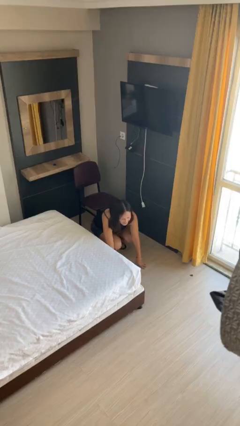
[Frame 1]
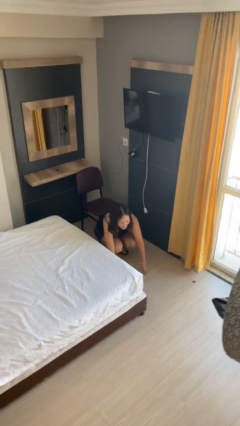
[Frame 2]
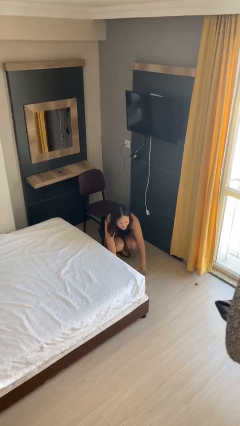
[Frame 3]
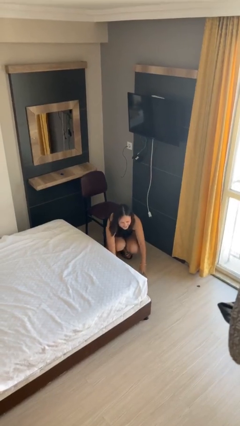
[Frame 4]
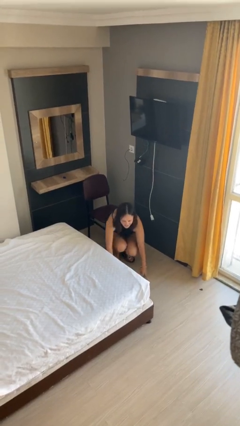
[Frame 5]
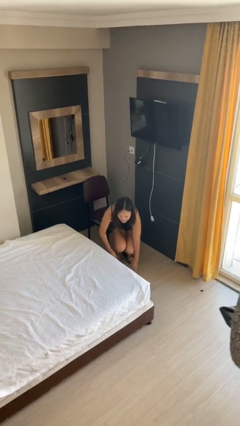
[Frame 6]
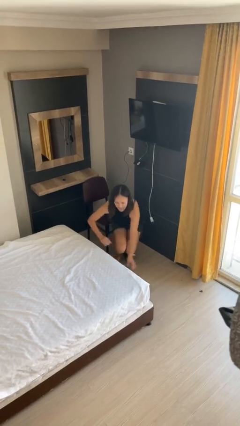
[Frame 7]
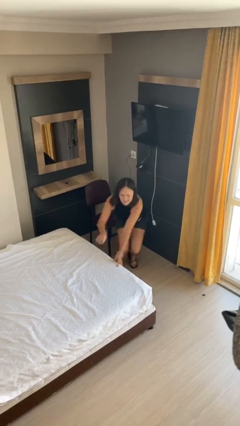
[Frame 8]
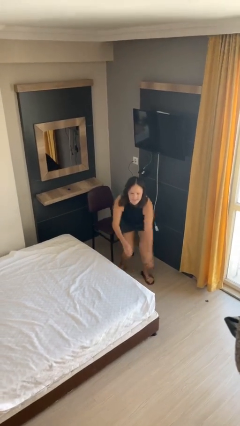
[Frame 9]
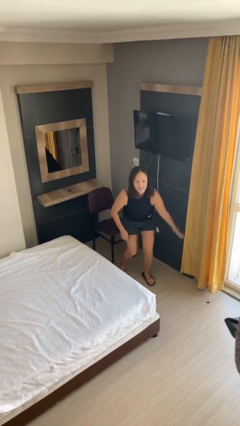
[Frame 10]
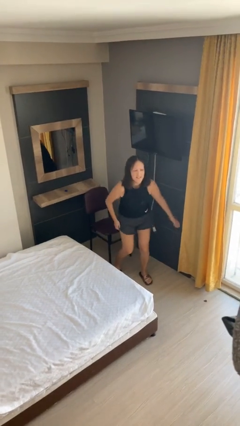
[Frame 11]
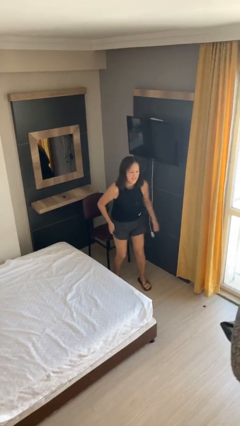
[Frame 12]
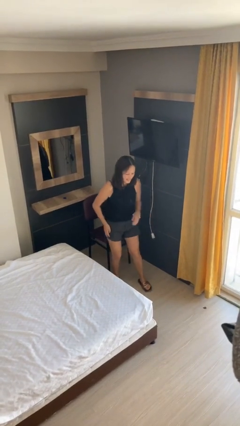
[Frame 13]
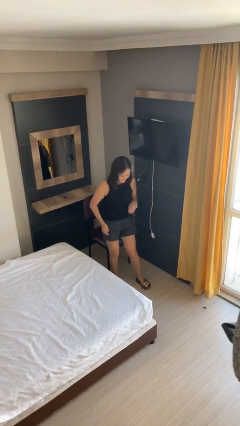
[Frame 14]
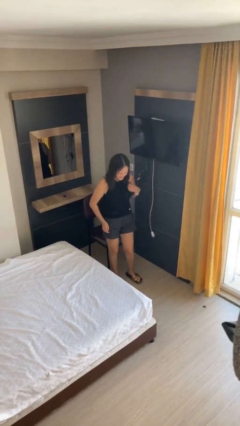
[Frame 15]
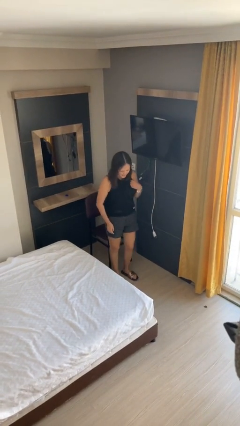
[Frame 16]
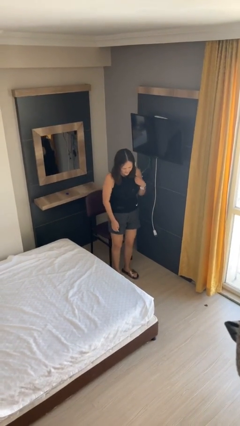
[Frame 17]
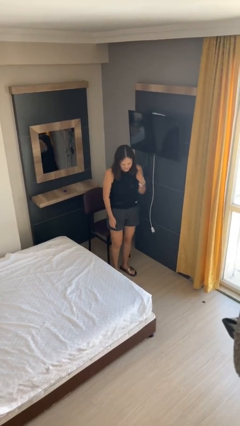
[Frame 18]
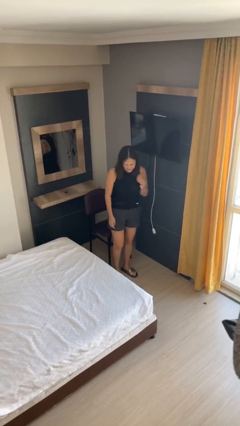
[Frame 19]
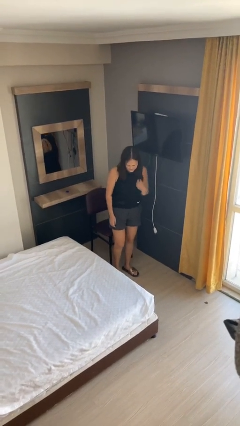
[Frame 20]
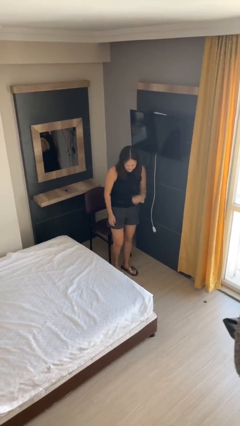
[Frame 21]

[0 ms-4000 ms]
person stands up from floor

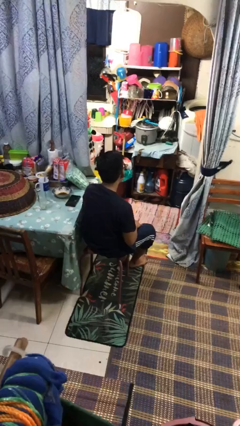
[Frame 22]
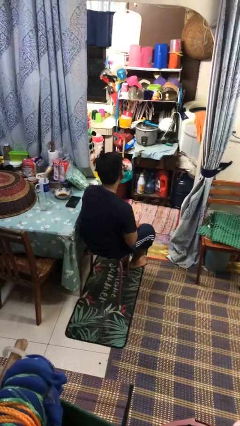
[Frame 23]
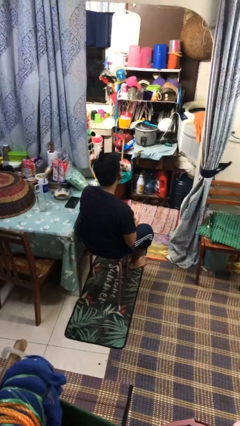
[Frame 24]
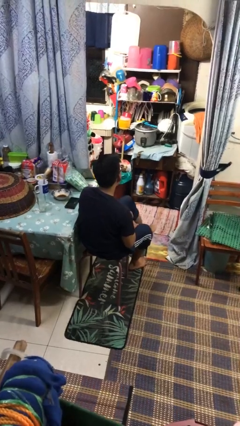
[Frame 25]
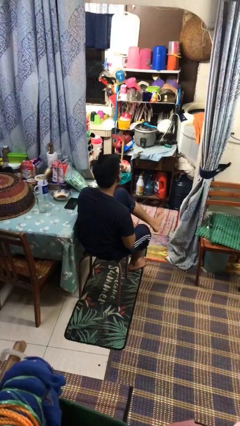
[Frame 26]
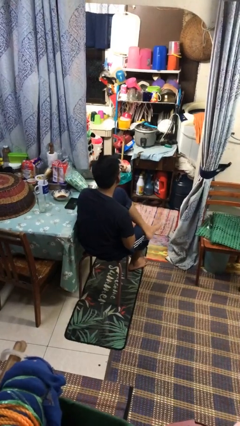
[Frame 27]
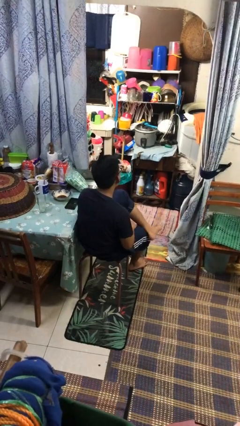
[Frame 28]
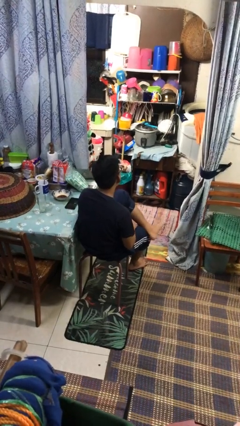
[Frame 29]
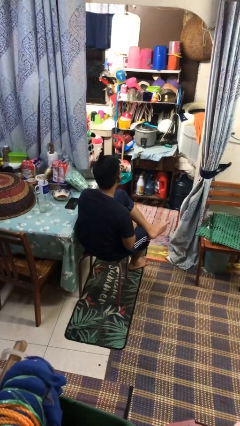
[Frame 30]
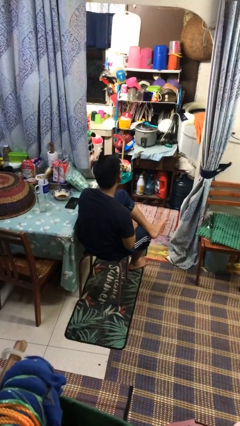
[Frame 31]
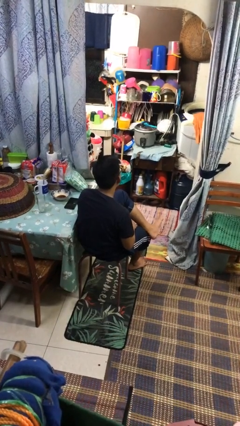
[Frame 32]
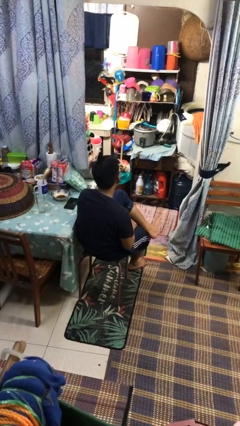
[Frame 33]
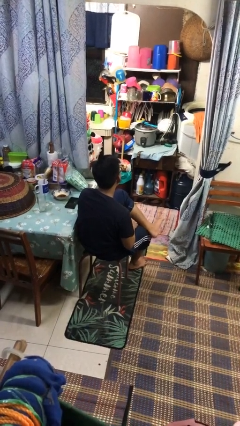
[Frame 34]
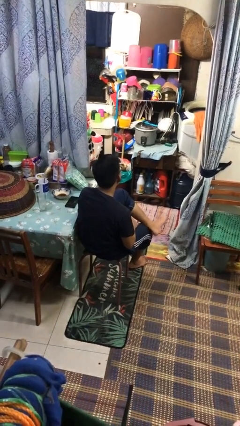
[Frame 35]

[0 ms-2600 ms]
person crosses legs

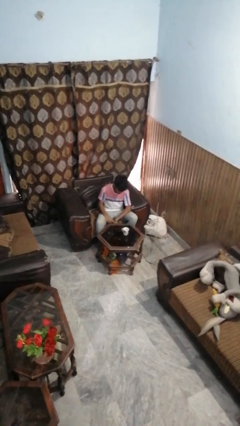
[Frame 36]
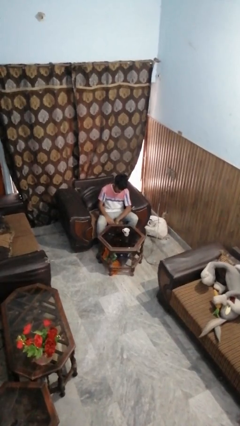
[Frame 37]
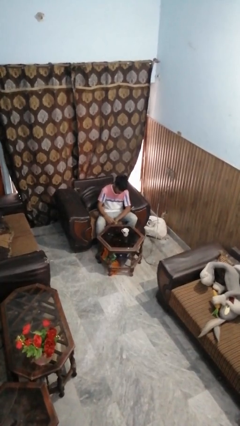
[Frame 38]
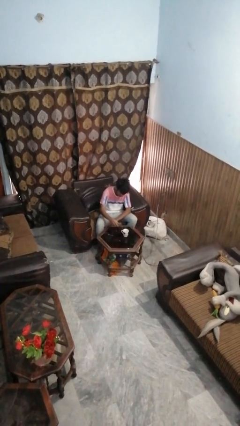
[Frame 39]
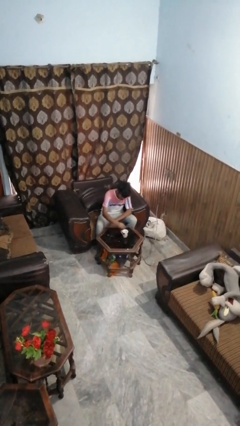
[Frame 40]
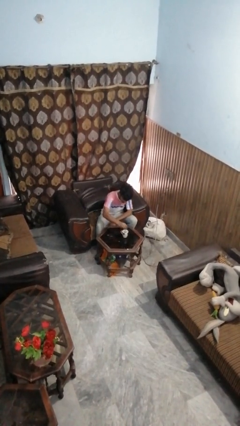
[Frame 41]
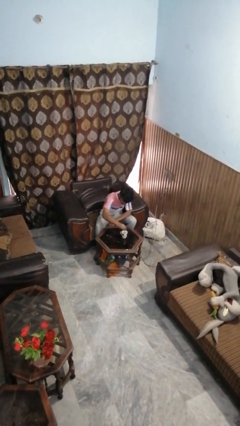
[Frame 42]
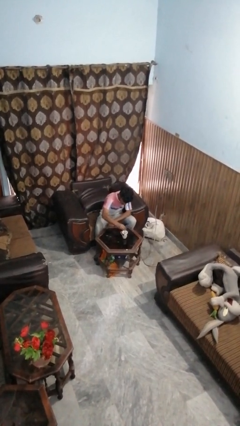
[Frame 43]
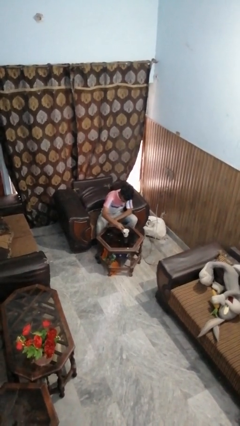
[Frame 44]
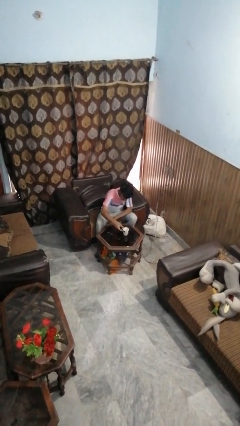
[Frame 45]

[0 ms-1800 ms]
person stirs mug

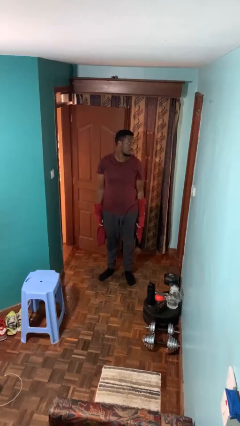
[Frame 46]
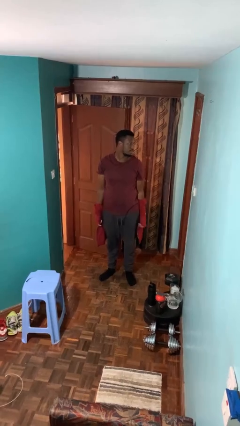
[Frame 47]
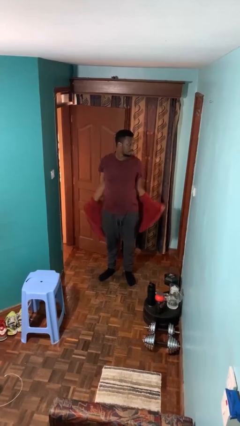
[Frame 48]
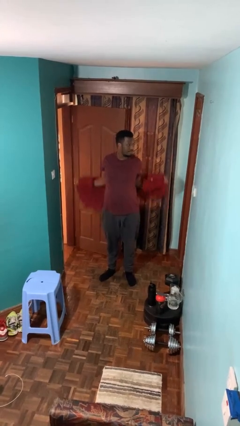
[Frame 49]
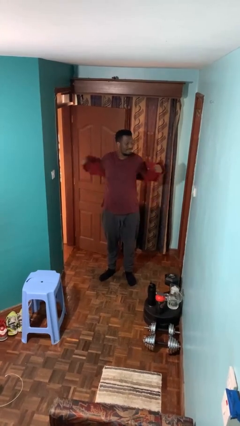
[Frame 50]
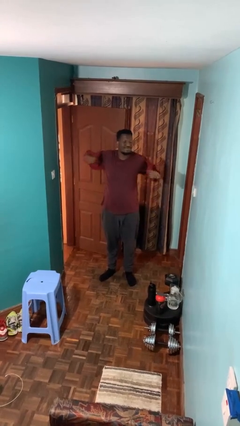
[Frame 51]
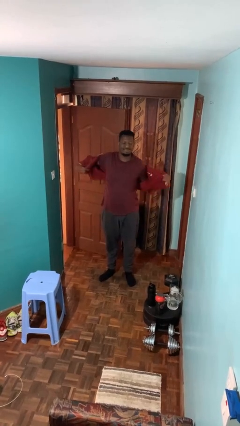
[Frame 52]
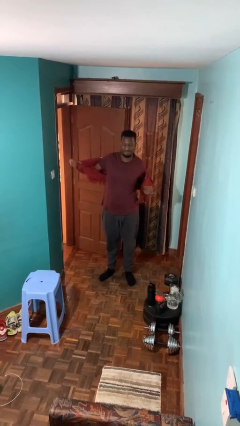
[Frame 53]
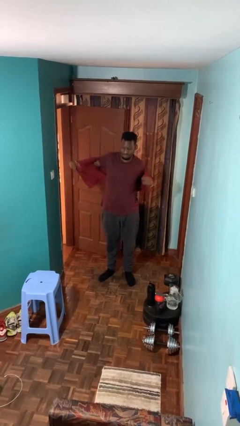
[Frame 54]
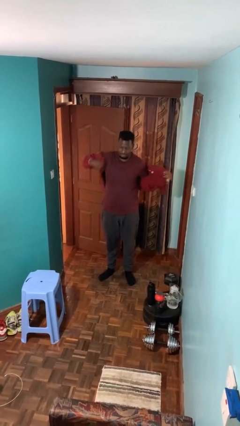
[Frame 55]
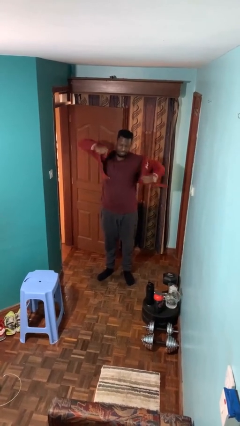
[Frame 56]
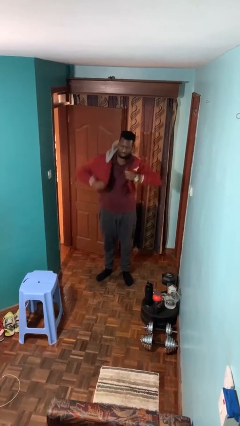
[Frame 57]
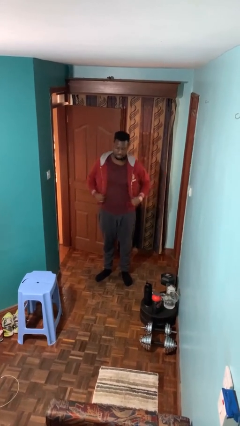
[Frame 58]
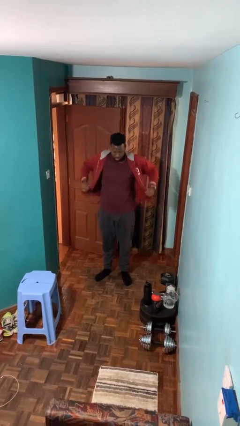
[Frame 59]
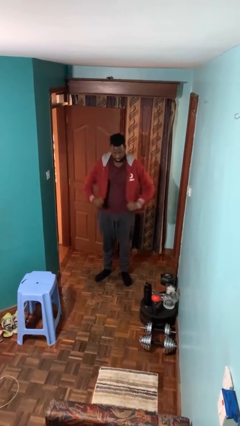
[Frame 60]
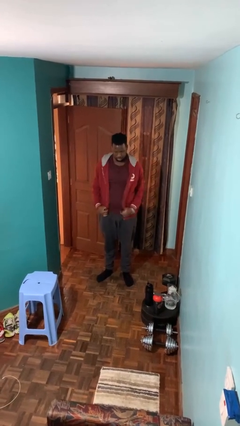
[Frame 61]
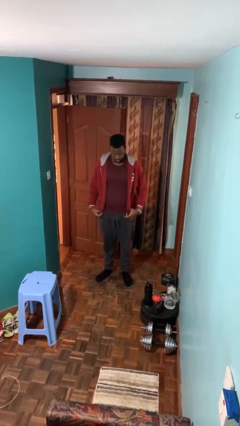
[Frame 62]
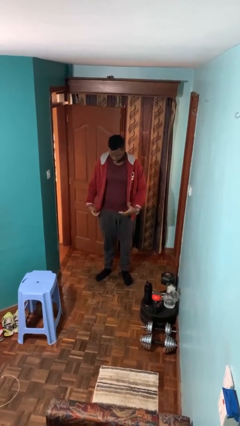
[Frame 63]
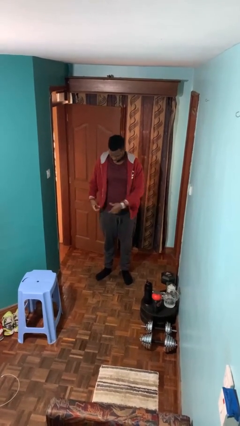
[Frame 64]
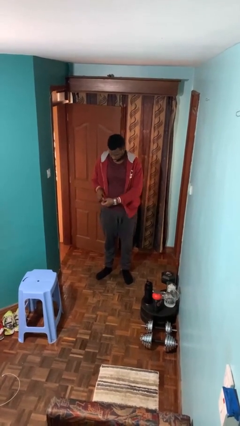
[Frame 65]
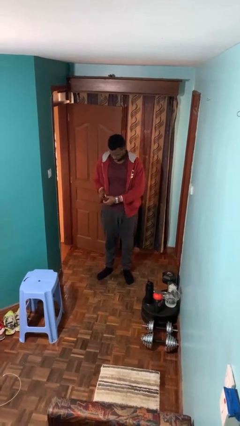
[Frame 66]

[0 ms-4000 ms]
person puts on jacket

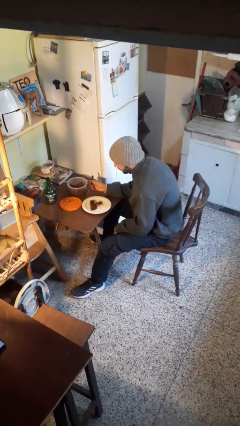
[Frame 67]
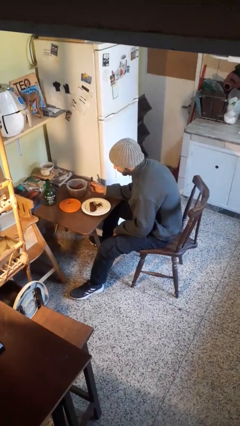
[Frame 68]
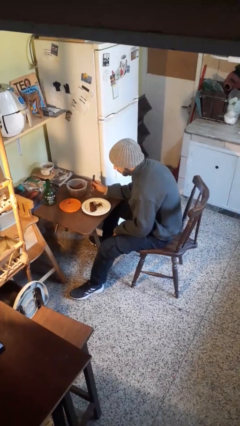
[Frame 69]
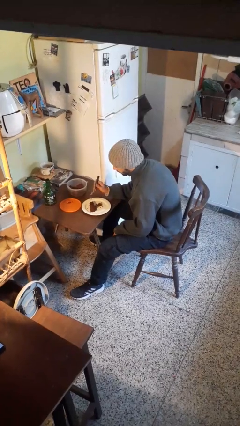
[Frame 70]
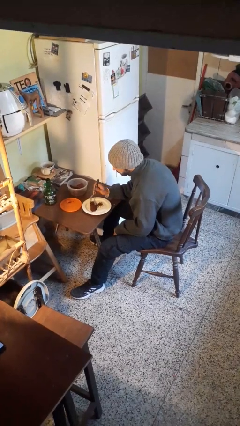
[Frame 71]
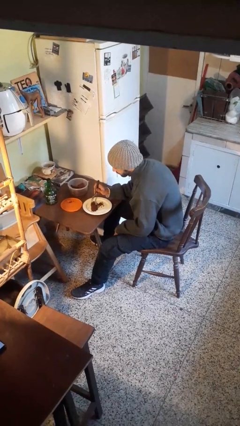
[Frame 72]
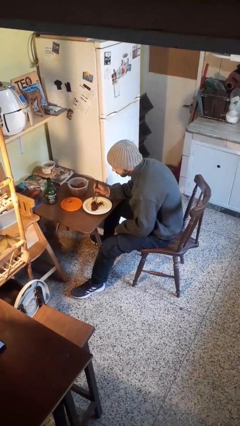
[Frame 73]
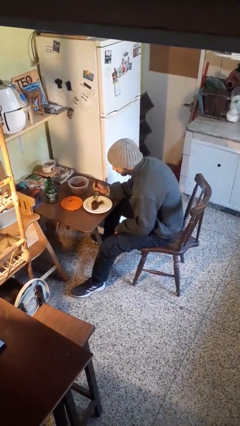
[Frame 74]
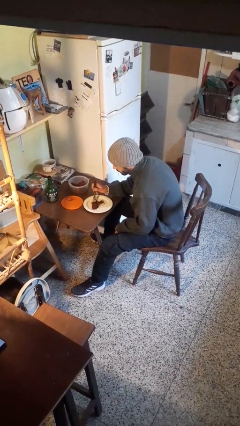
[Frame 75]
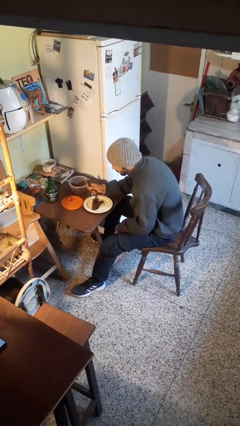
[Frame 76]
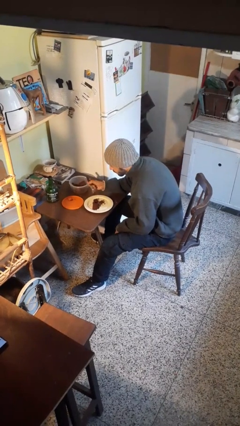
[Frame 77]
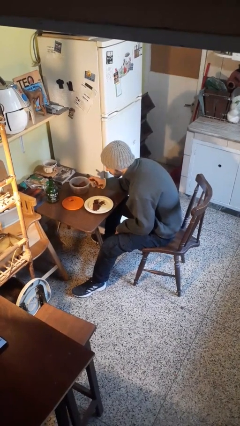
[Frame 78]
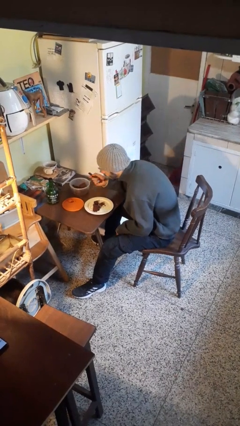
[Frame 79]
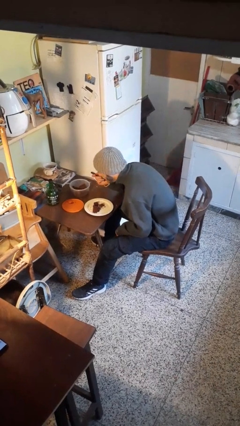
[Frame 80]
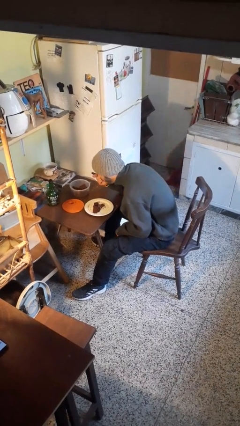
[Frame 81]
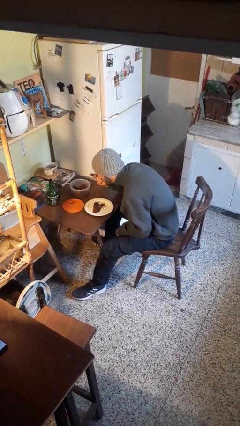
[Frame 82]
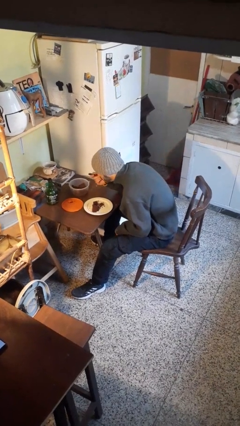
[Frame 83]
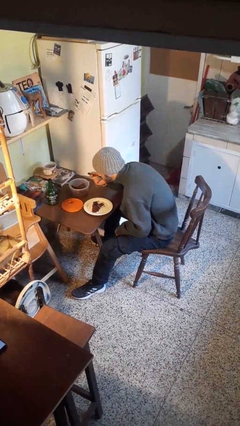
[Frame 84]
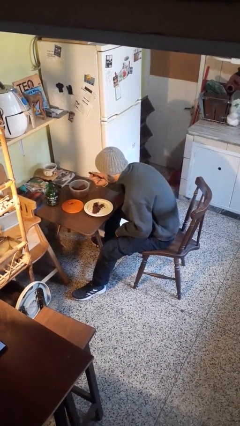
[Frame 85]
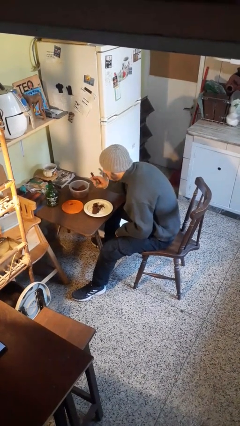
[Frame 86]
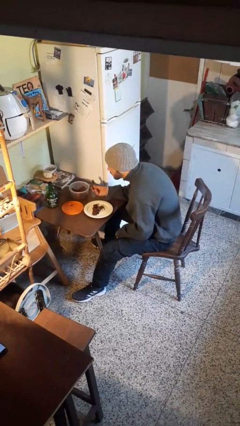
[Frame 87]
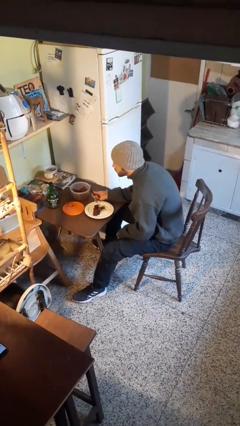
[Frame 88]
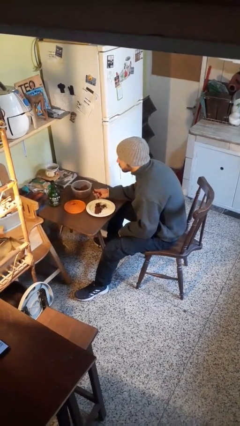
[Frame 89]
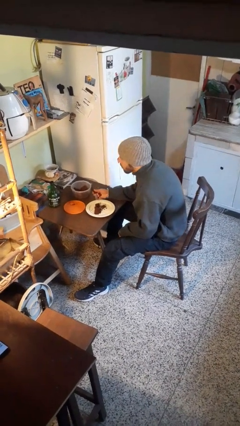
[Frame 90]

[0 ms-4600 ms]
person eats with utensil

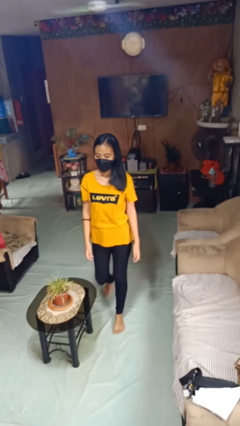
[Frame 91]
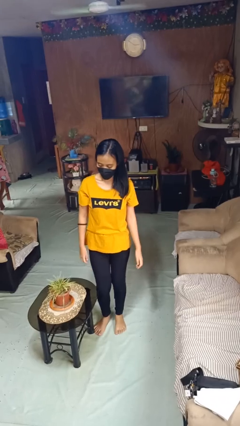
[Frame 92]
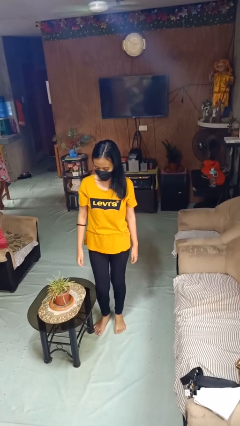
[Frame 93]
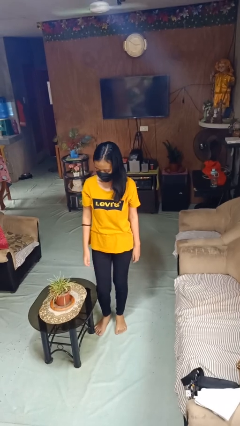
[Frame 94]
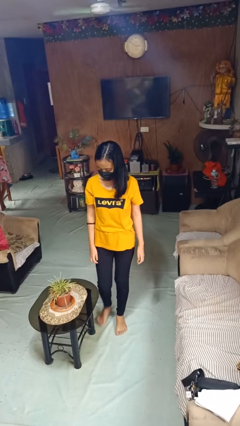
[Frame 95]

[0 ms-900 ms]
person bumps into table
